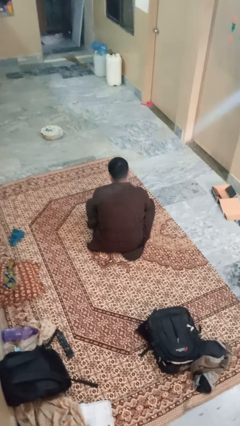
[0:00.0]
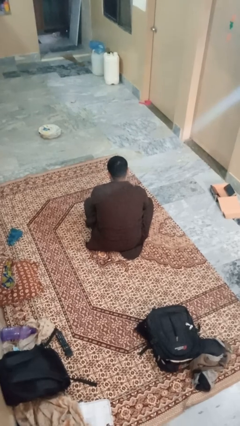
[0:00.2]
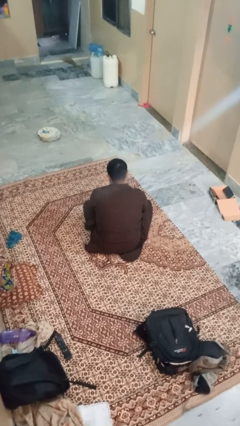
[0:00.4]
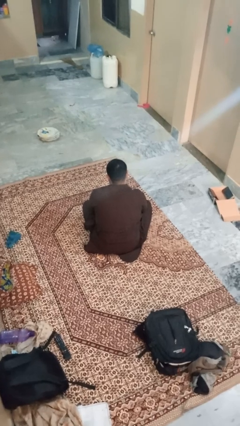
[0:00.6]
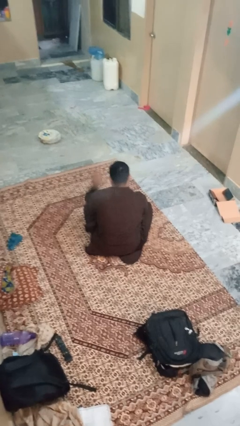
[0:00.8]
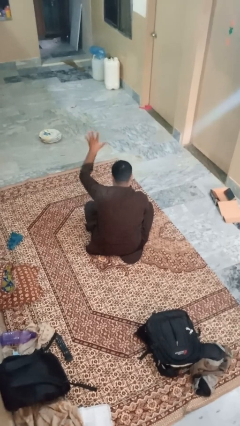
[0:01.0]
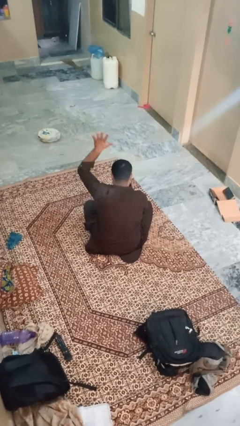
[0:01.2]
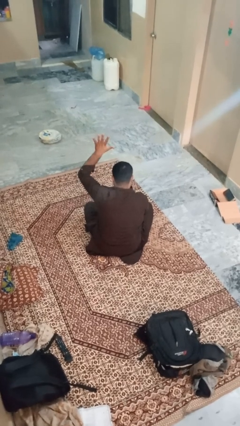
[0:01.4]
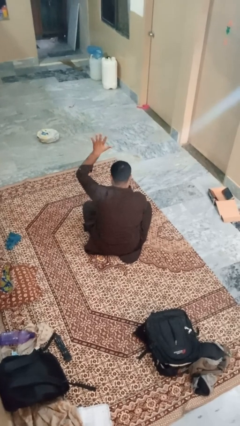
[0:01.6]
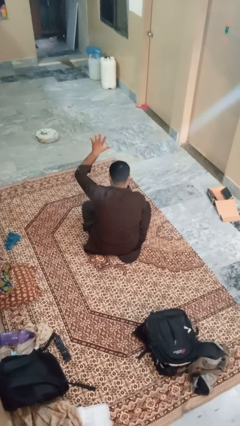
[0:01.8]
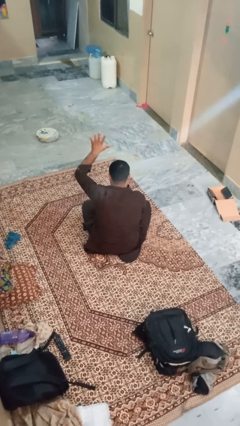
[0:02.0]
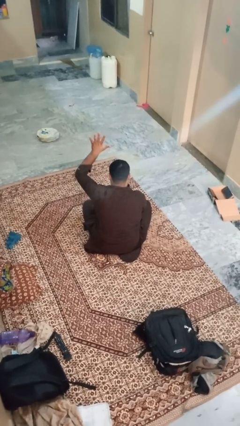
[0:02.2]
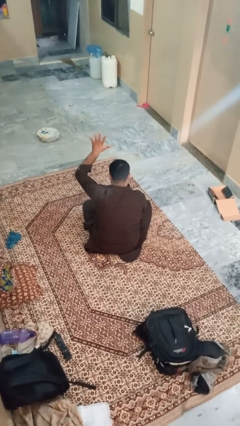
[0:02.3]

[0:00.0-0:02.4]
person gestures number five

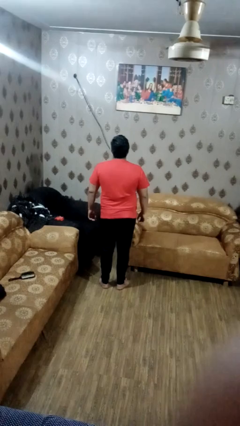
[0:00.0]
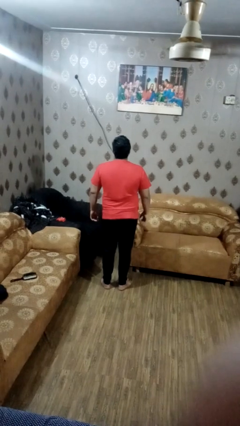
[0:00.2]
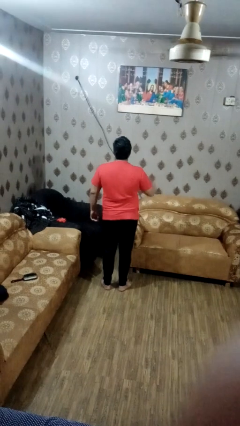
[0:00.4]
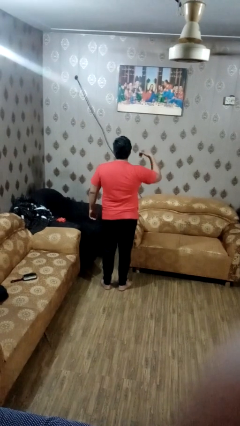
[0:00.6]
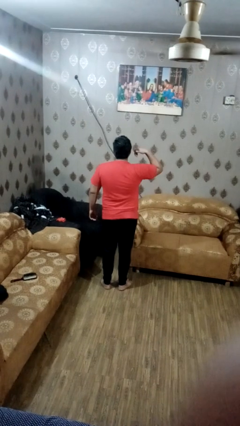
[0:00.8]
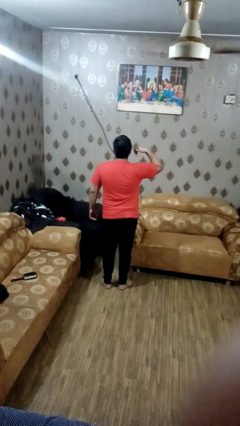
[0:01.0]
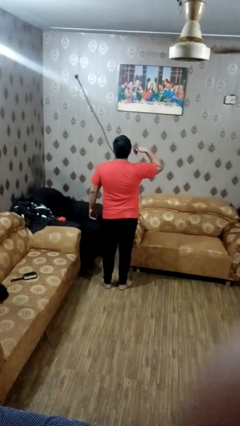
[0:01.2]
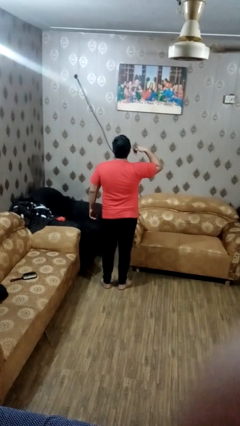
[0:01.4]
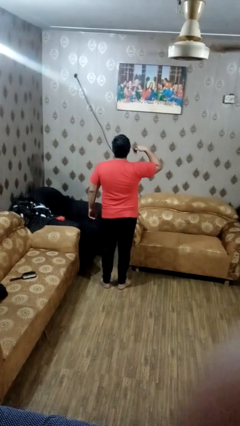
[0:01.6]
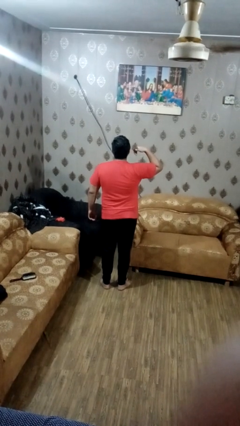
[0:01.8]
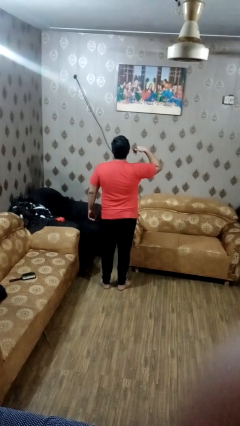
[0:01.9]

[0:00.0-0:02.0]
person gestures call me

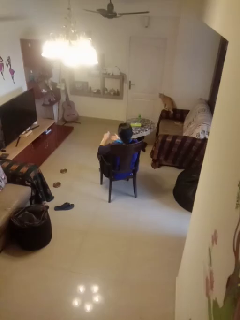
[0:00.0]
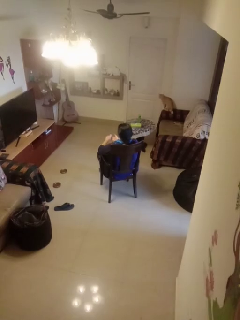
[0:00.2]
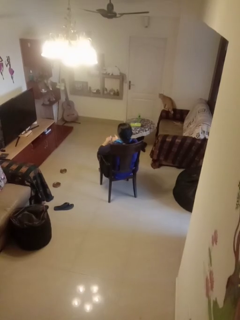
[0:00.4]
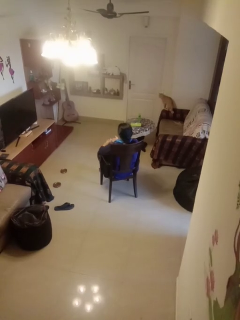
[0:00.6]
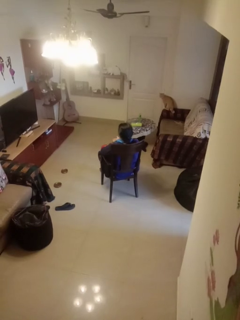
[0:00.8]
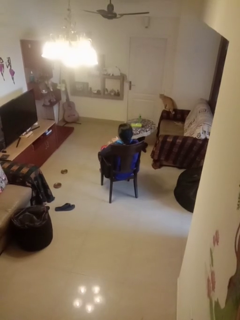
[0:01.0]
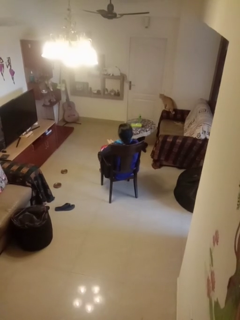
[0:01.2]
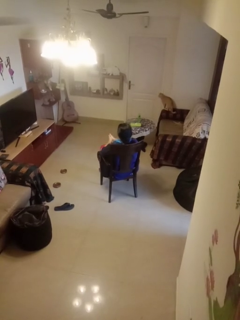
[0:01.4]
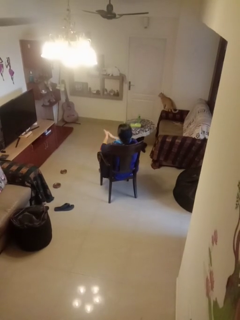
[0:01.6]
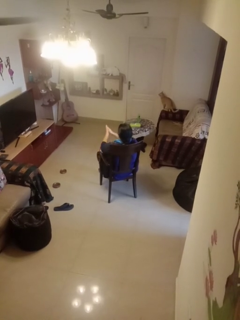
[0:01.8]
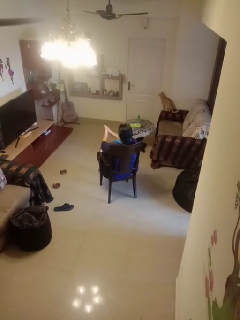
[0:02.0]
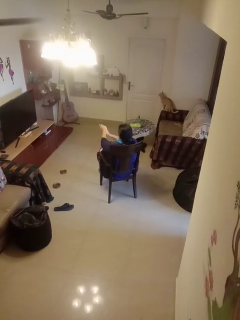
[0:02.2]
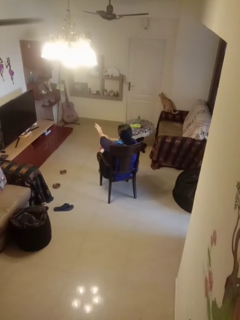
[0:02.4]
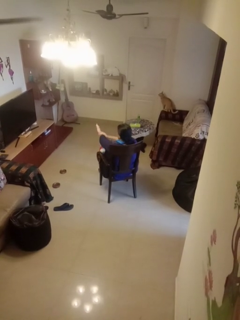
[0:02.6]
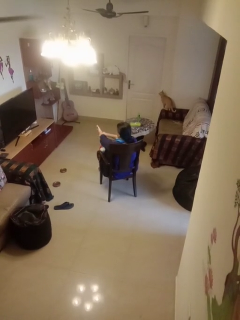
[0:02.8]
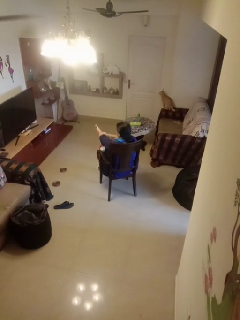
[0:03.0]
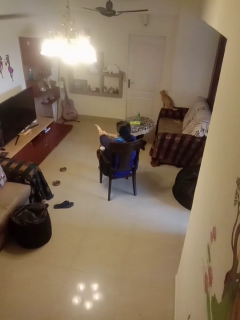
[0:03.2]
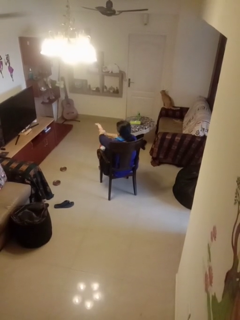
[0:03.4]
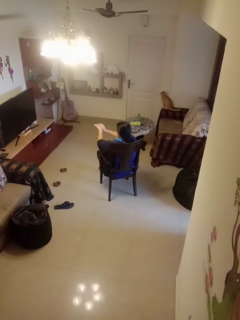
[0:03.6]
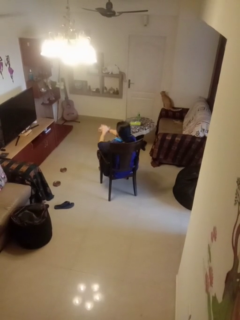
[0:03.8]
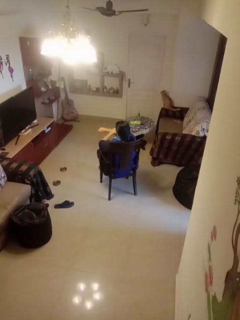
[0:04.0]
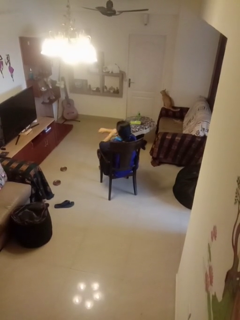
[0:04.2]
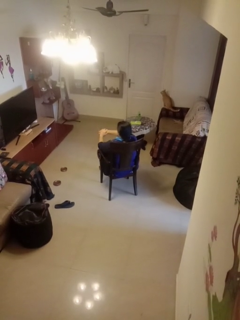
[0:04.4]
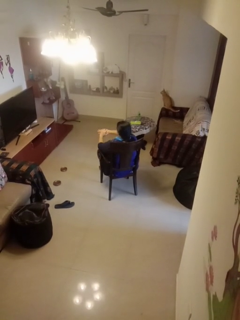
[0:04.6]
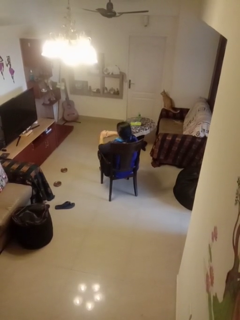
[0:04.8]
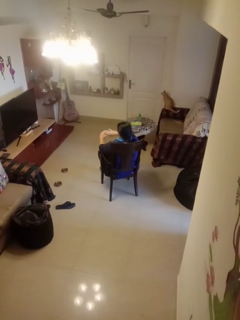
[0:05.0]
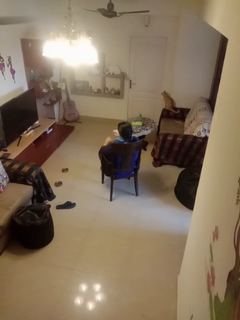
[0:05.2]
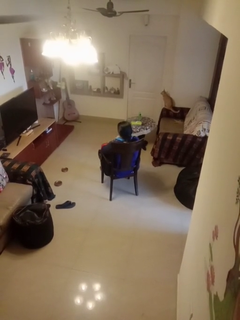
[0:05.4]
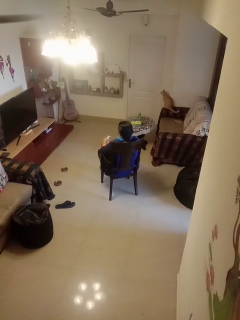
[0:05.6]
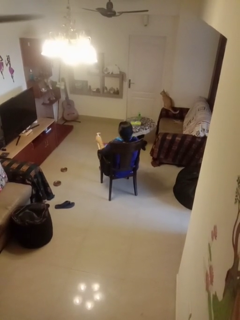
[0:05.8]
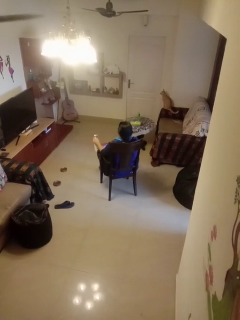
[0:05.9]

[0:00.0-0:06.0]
person applies sunscreen

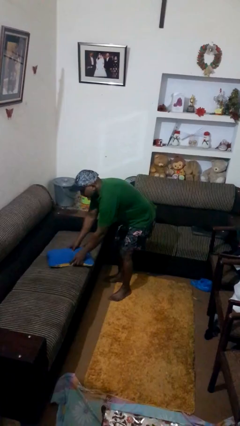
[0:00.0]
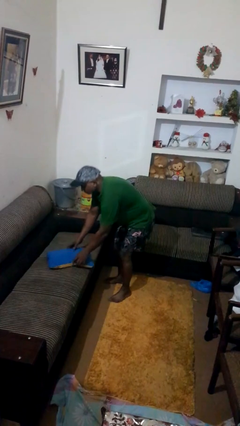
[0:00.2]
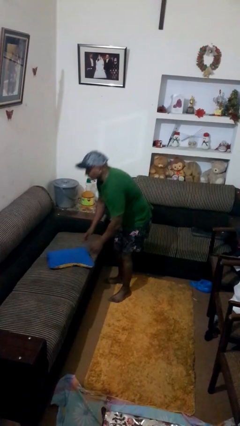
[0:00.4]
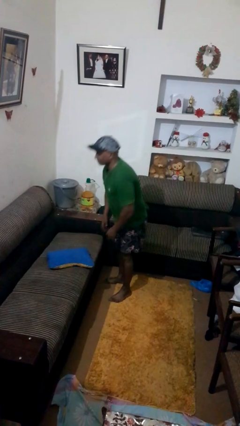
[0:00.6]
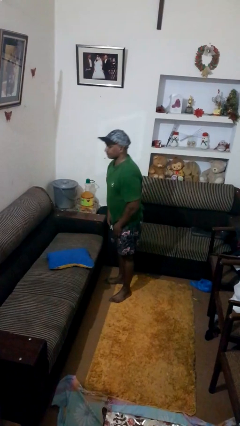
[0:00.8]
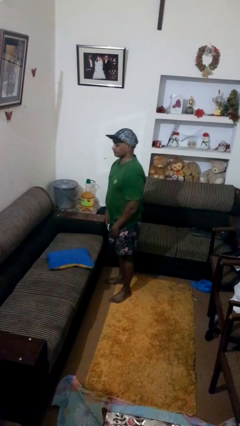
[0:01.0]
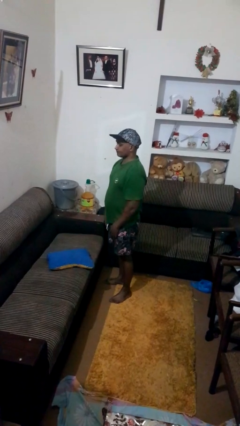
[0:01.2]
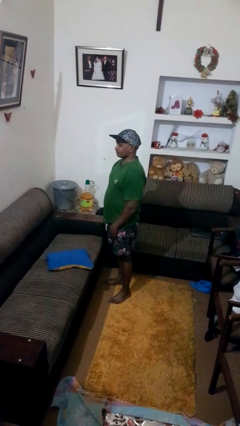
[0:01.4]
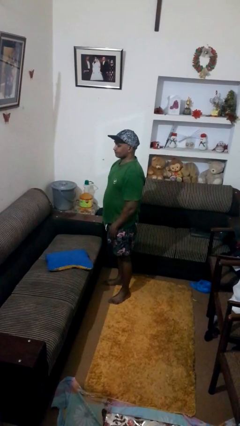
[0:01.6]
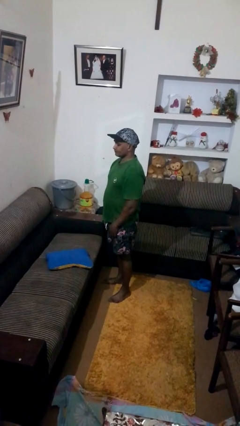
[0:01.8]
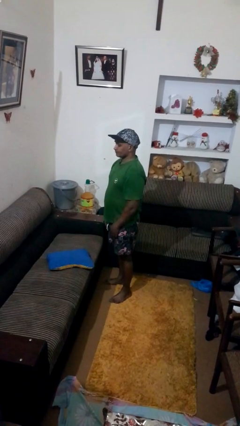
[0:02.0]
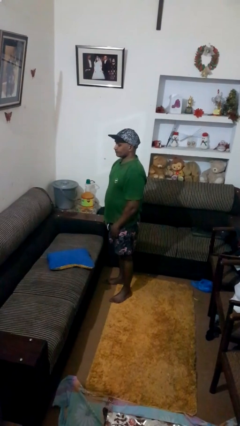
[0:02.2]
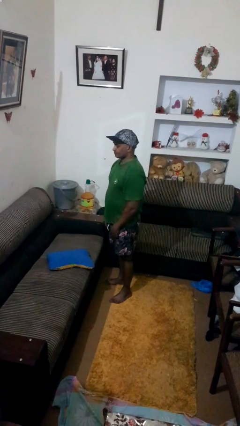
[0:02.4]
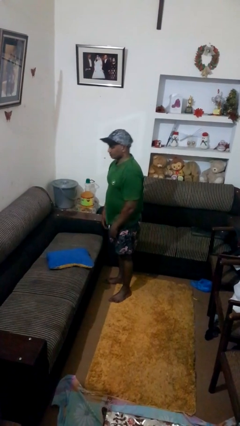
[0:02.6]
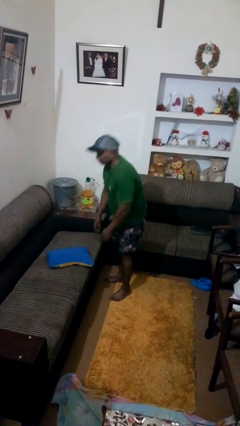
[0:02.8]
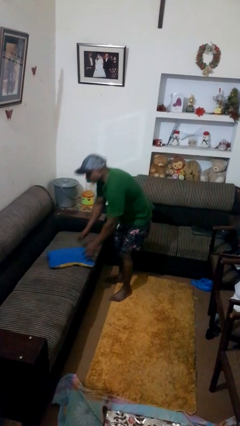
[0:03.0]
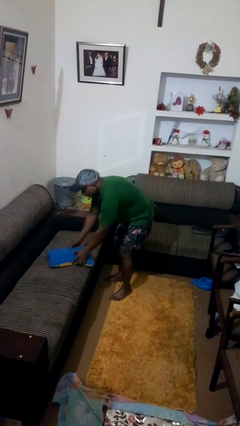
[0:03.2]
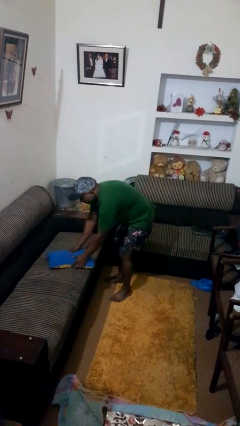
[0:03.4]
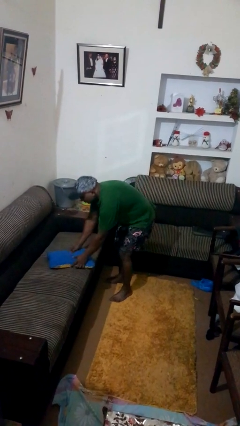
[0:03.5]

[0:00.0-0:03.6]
person puts down object on couch

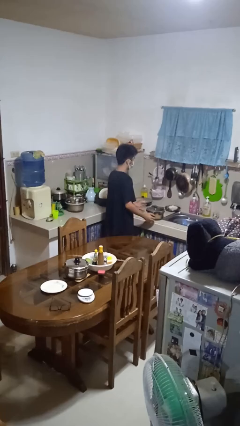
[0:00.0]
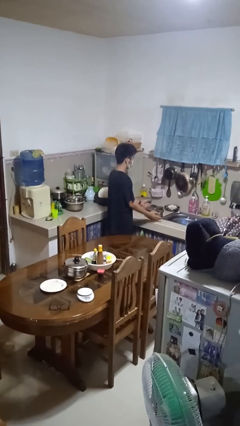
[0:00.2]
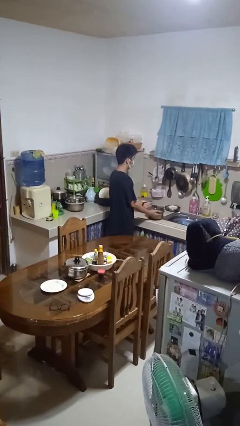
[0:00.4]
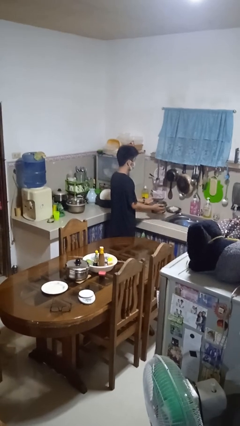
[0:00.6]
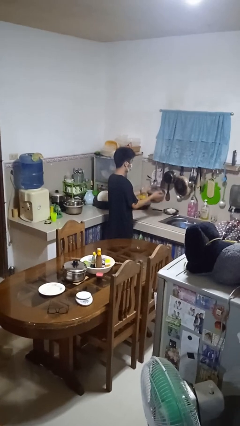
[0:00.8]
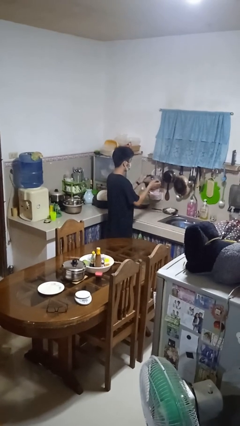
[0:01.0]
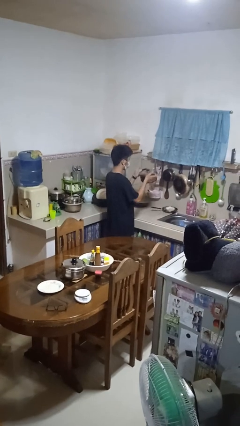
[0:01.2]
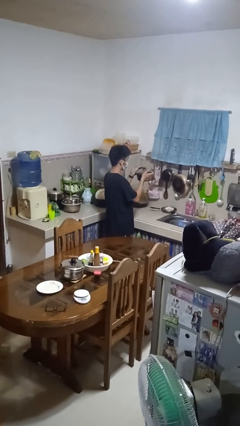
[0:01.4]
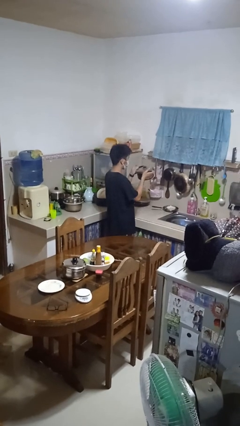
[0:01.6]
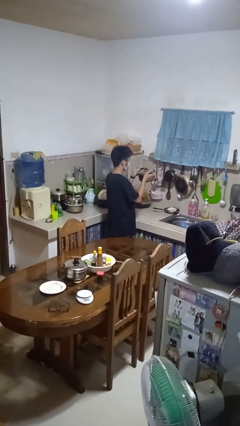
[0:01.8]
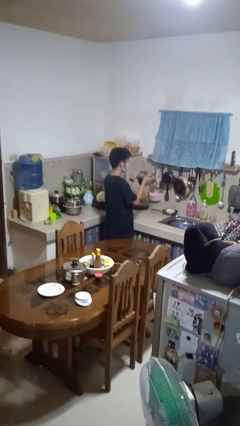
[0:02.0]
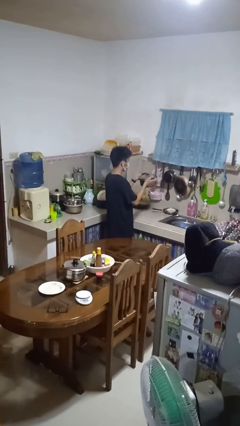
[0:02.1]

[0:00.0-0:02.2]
person picks up object from countertop

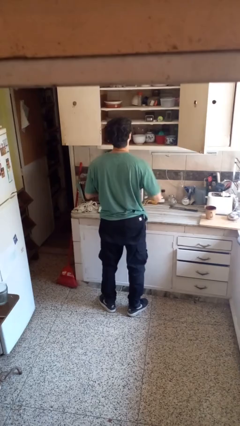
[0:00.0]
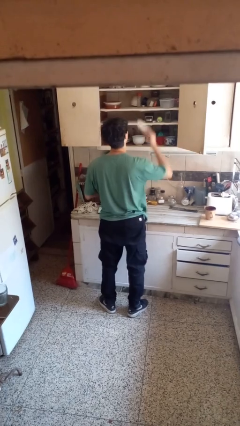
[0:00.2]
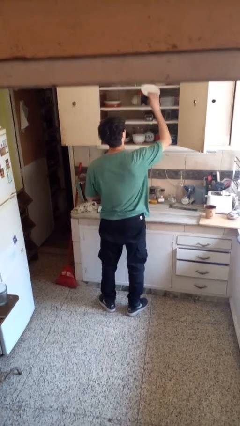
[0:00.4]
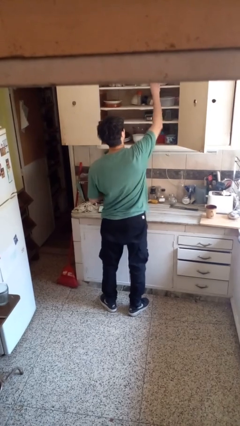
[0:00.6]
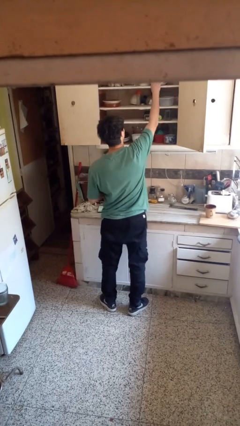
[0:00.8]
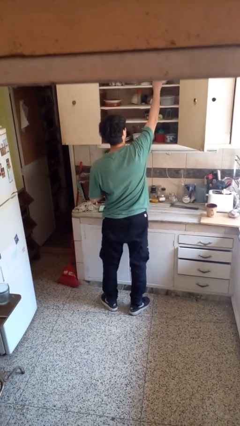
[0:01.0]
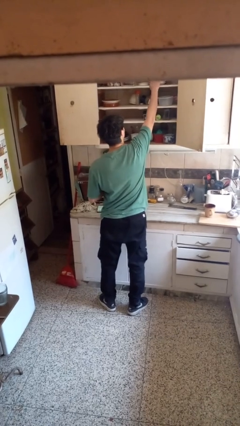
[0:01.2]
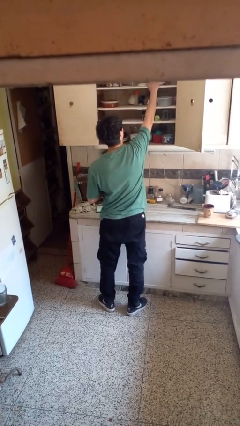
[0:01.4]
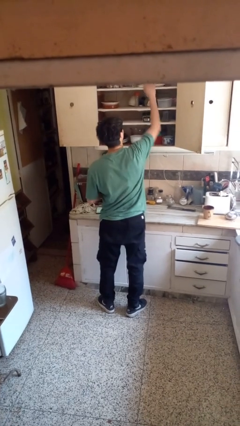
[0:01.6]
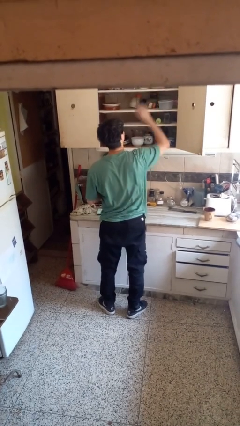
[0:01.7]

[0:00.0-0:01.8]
person puts object in cabinet

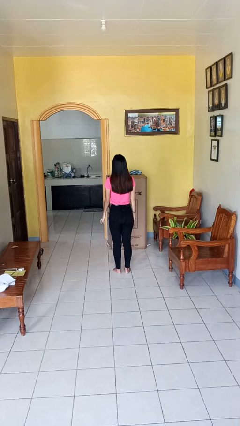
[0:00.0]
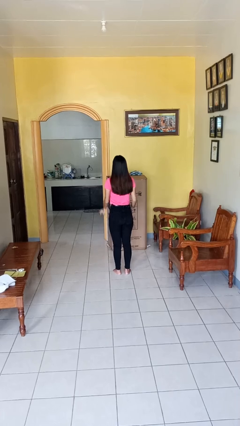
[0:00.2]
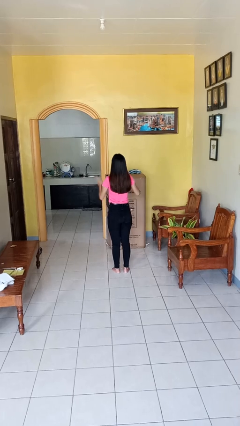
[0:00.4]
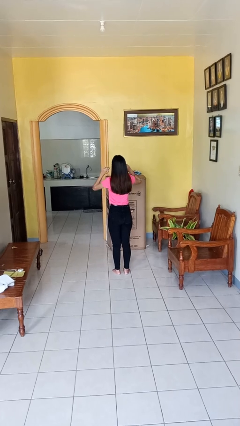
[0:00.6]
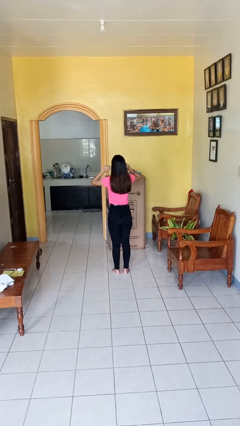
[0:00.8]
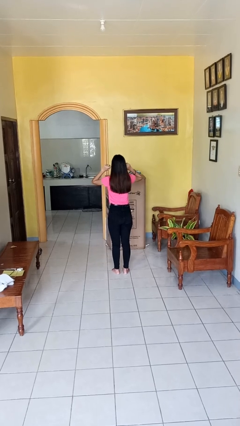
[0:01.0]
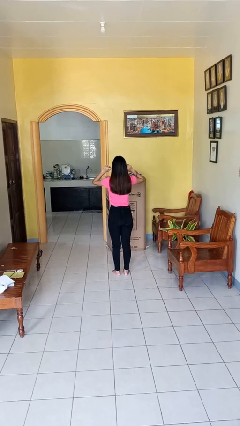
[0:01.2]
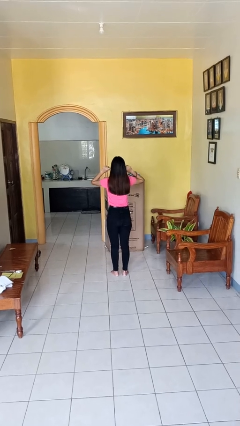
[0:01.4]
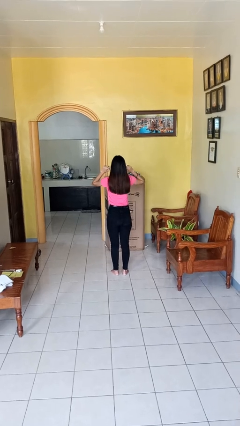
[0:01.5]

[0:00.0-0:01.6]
person puts fingers in ear
